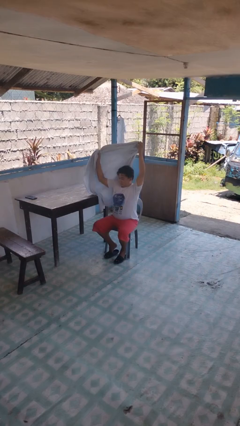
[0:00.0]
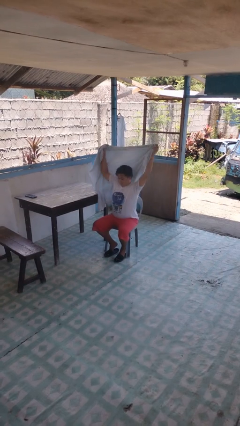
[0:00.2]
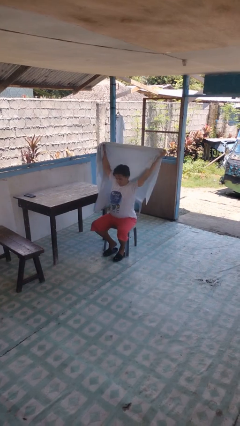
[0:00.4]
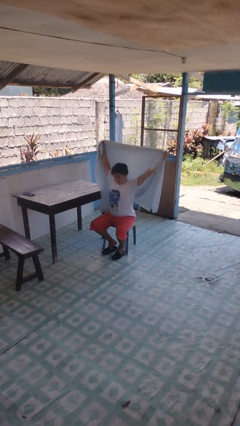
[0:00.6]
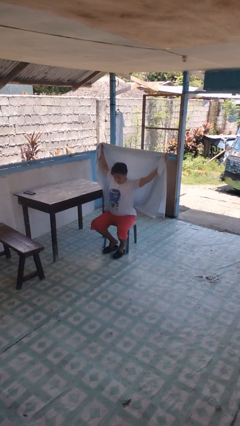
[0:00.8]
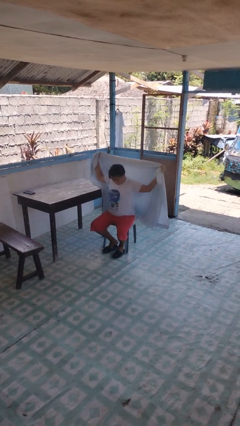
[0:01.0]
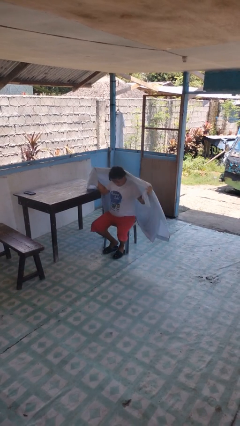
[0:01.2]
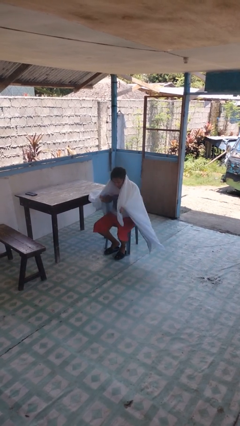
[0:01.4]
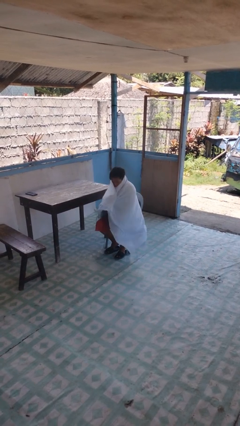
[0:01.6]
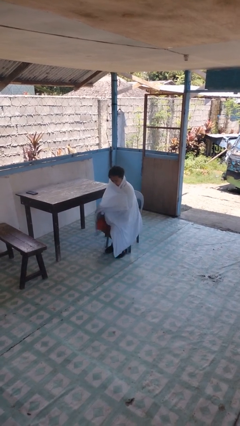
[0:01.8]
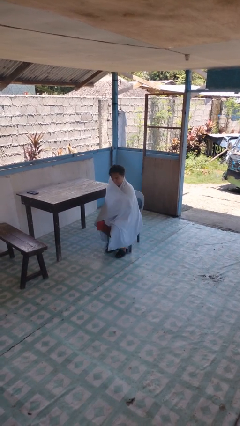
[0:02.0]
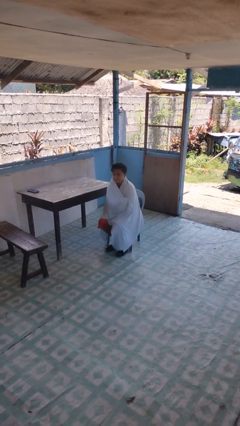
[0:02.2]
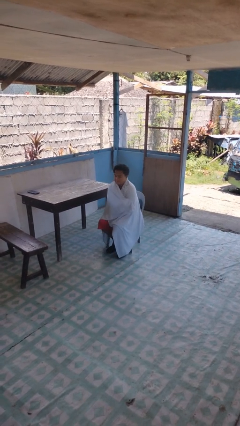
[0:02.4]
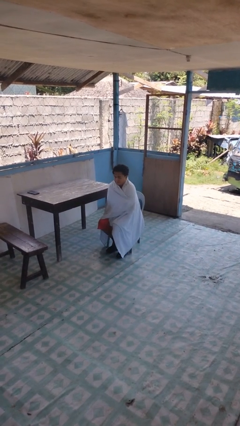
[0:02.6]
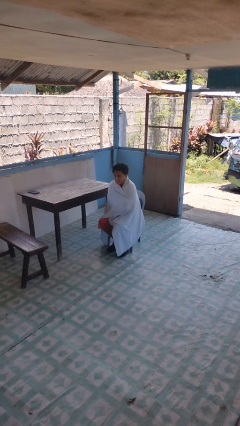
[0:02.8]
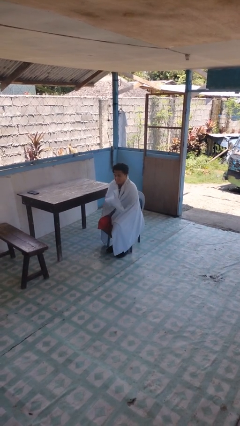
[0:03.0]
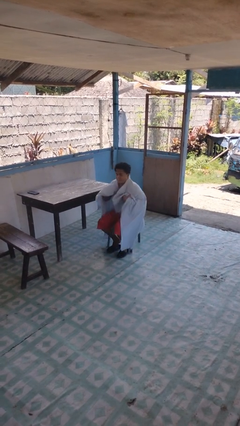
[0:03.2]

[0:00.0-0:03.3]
person covers with blanket

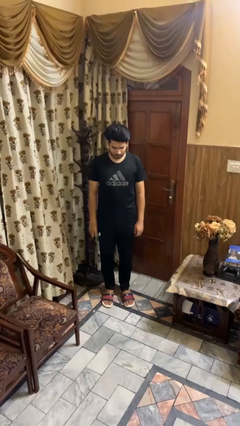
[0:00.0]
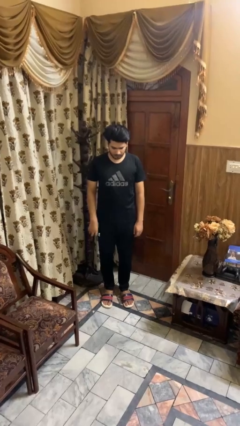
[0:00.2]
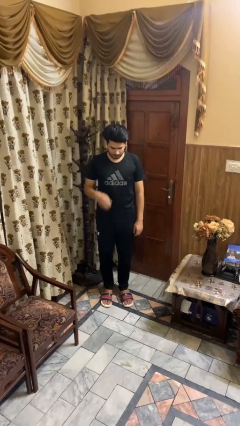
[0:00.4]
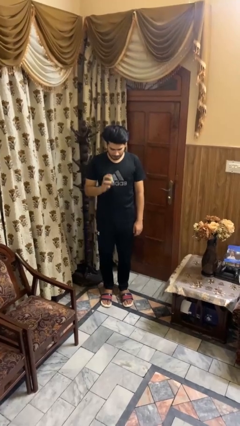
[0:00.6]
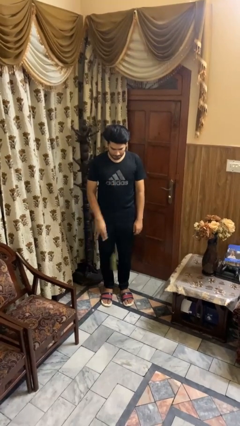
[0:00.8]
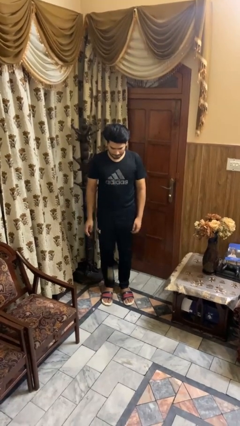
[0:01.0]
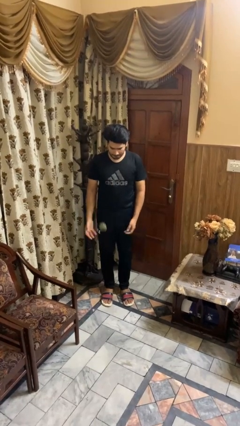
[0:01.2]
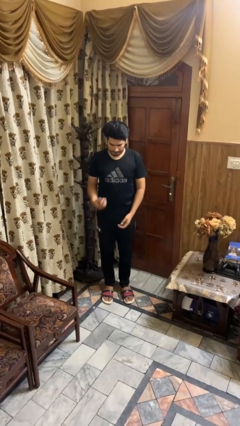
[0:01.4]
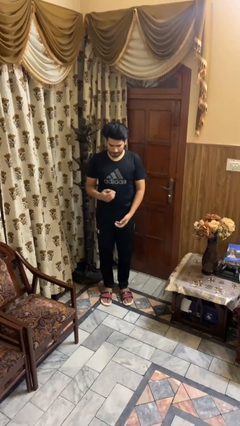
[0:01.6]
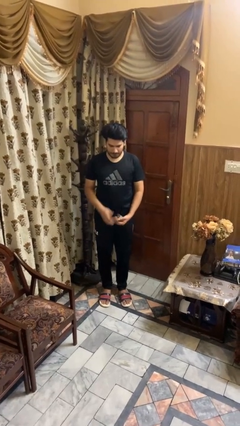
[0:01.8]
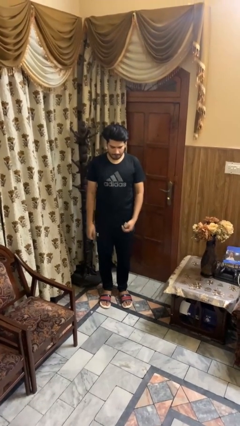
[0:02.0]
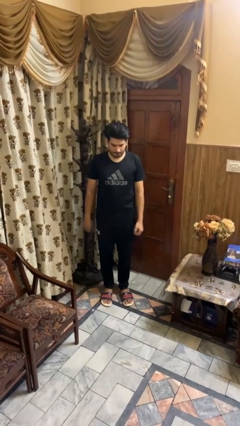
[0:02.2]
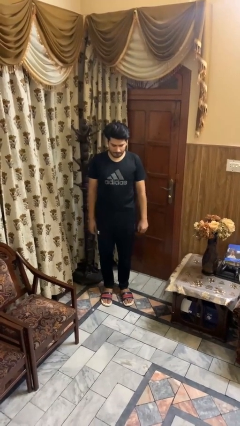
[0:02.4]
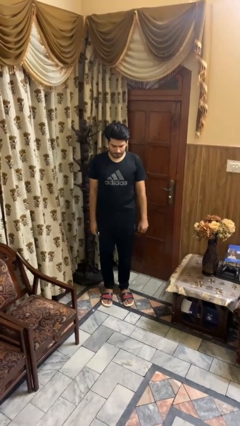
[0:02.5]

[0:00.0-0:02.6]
person bounces ball on floor

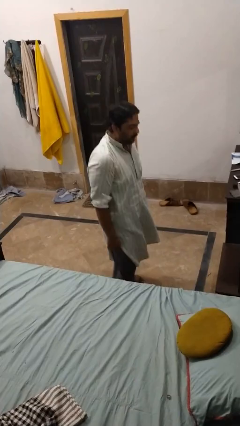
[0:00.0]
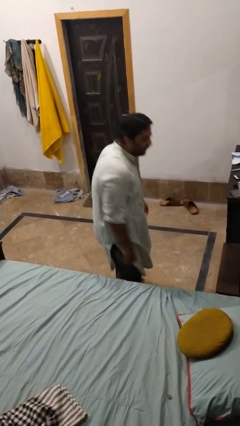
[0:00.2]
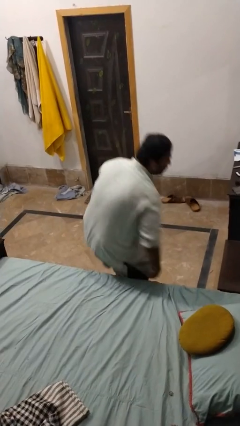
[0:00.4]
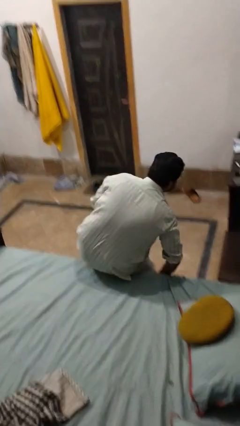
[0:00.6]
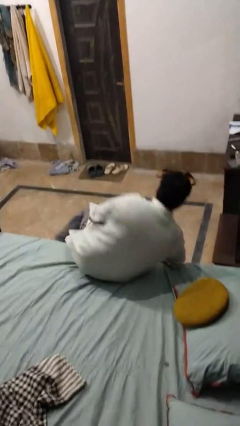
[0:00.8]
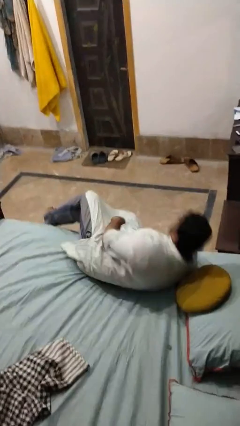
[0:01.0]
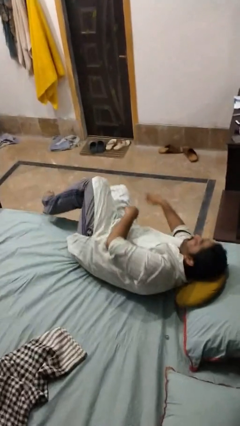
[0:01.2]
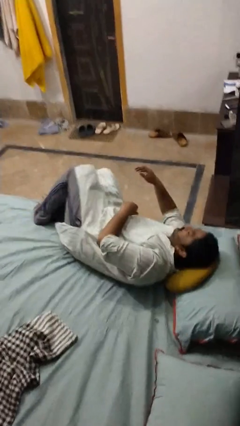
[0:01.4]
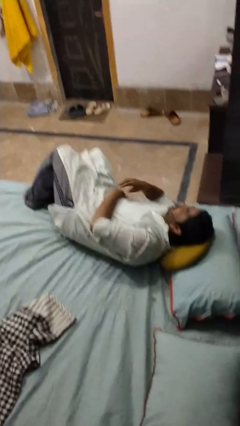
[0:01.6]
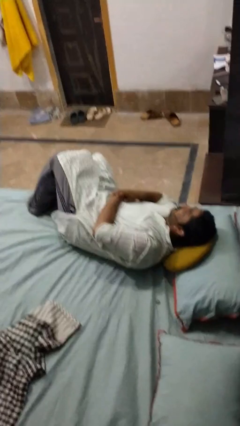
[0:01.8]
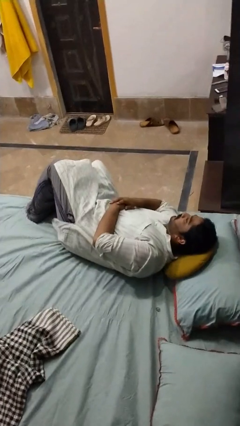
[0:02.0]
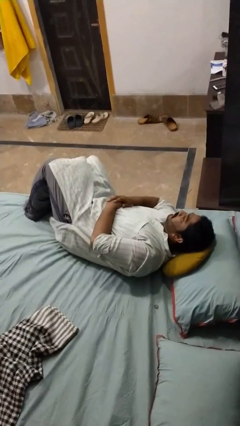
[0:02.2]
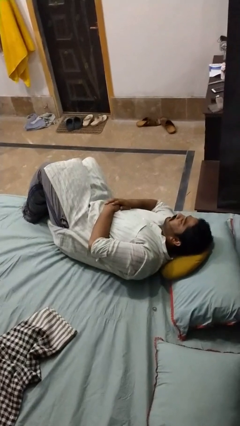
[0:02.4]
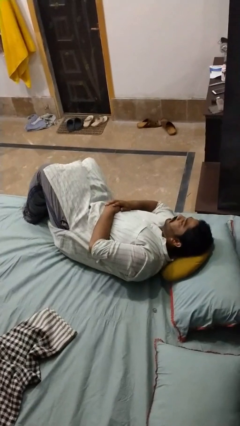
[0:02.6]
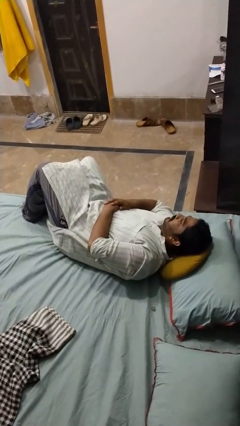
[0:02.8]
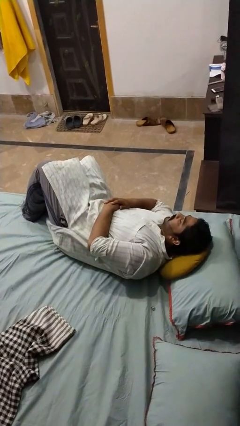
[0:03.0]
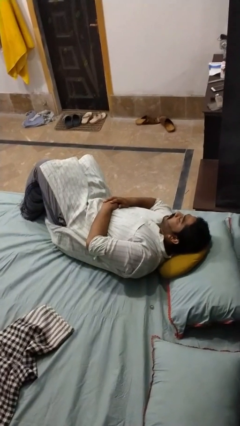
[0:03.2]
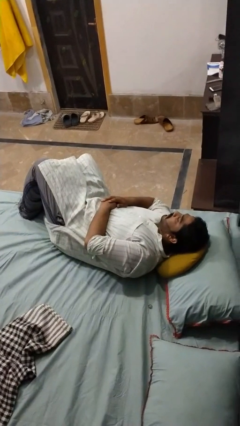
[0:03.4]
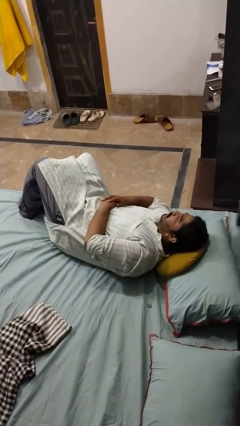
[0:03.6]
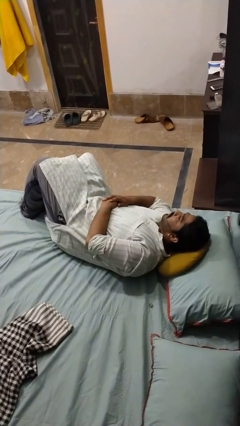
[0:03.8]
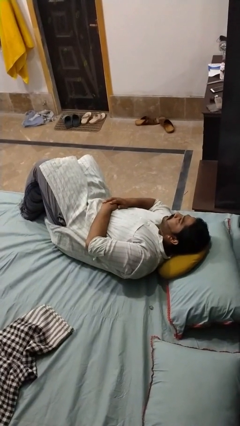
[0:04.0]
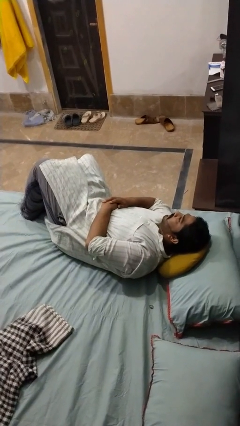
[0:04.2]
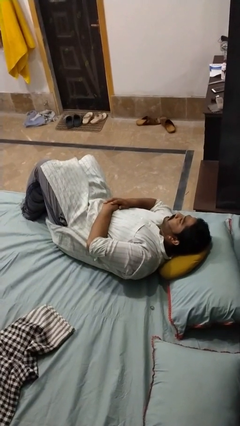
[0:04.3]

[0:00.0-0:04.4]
person lies down on bed

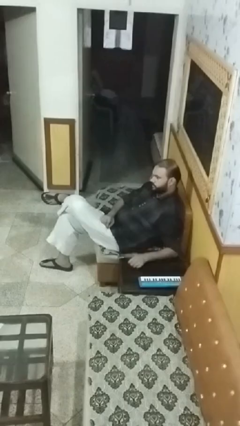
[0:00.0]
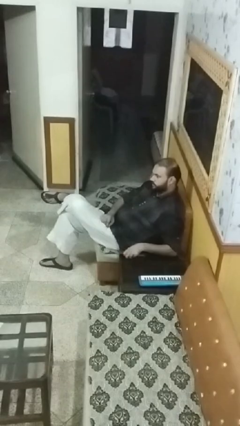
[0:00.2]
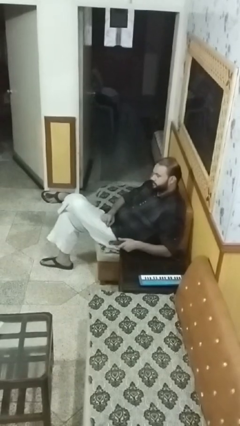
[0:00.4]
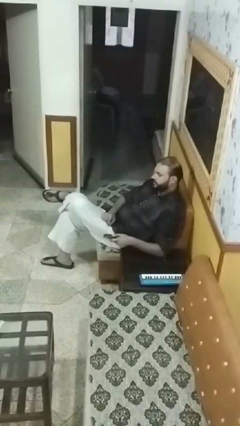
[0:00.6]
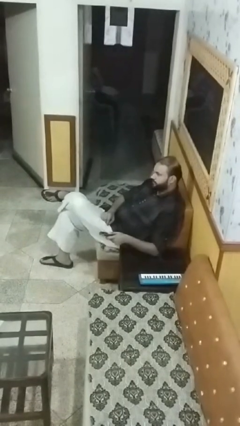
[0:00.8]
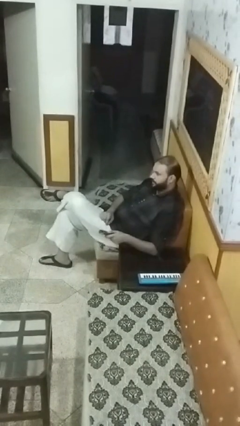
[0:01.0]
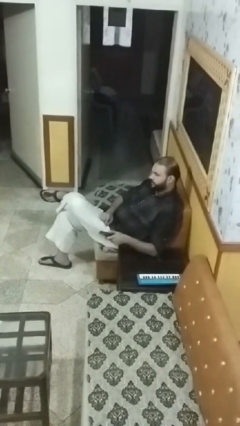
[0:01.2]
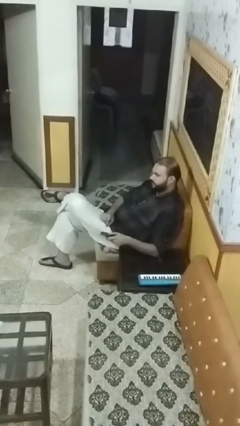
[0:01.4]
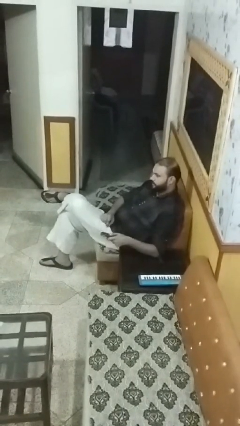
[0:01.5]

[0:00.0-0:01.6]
person uses television remote

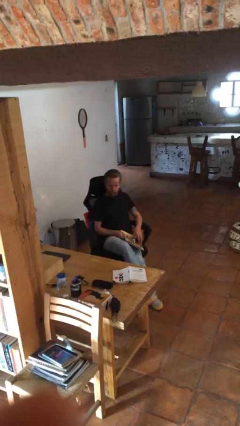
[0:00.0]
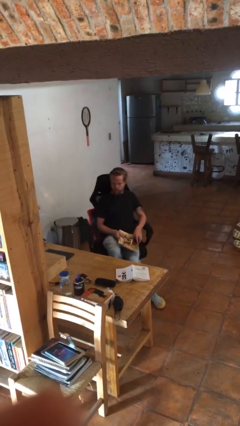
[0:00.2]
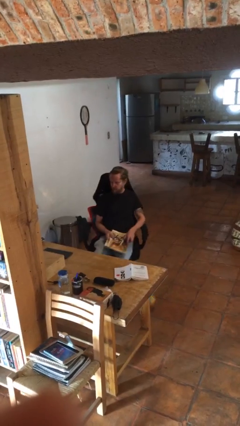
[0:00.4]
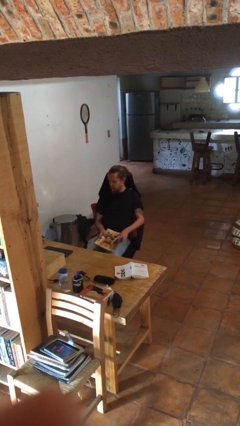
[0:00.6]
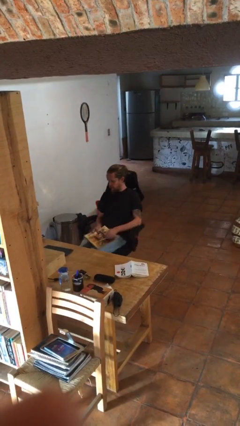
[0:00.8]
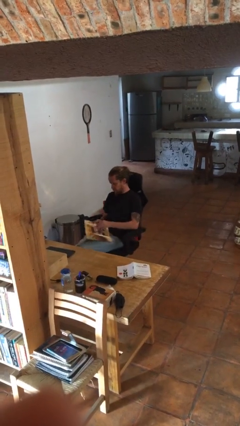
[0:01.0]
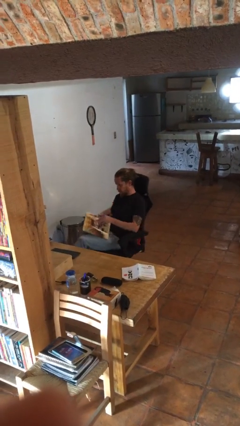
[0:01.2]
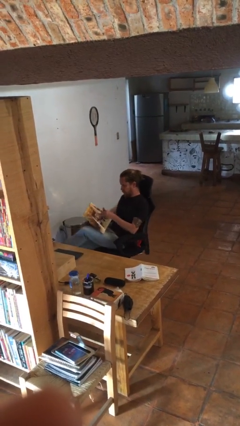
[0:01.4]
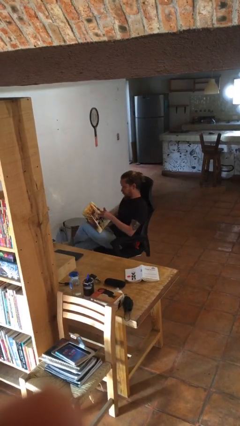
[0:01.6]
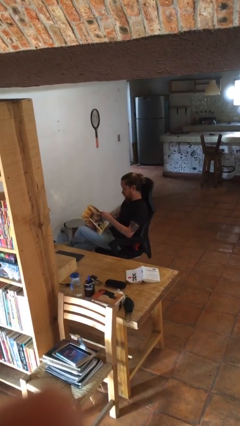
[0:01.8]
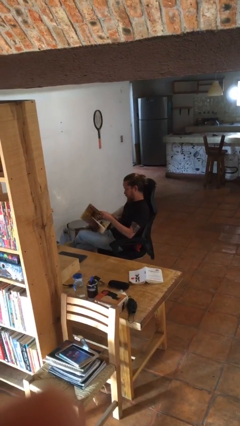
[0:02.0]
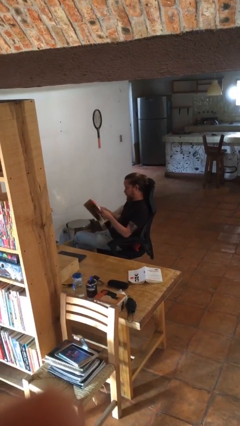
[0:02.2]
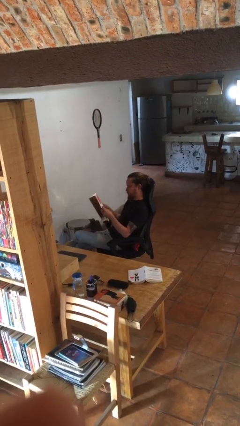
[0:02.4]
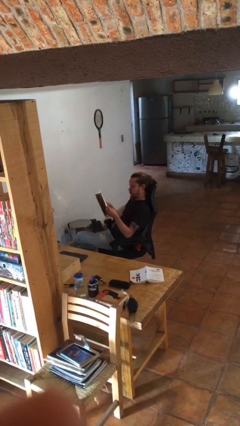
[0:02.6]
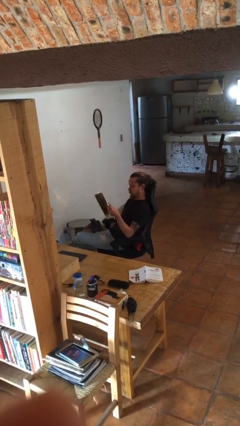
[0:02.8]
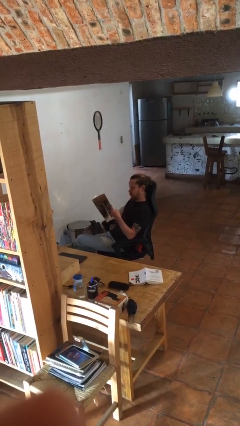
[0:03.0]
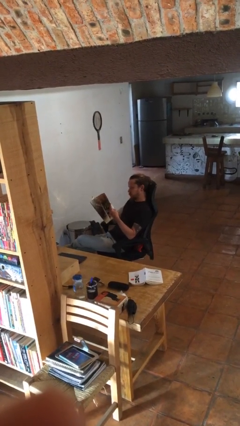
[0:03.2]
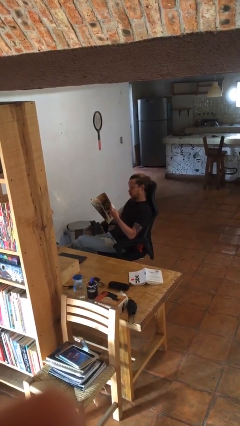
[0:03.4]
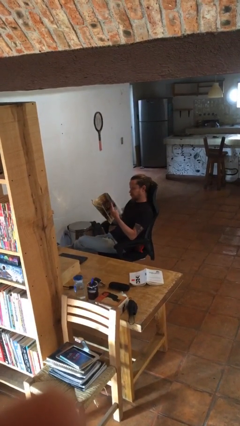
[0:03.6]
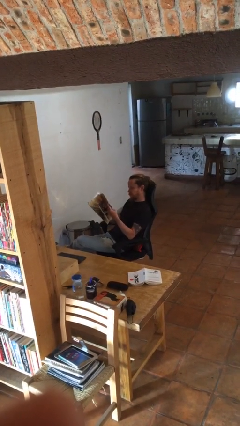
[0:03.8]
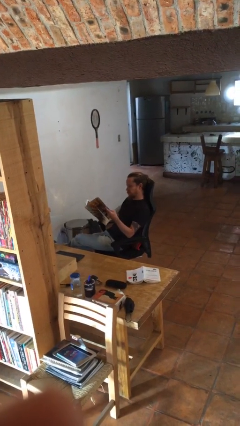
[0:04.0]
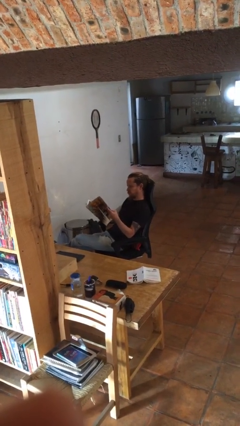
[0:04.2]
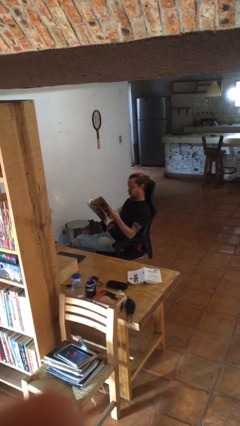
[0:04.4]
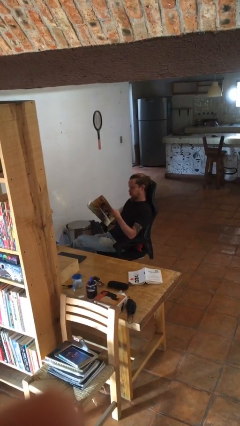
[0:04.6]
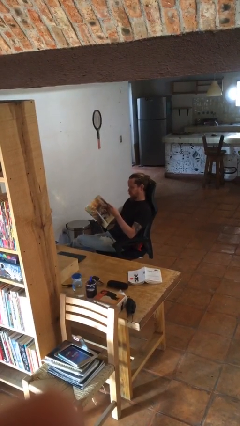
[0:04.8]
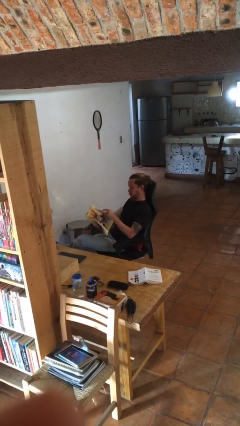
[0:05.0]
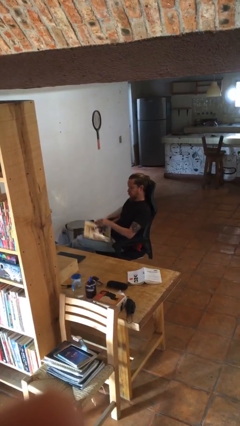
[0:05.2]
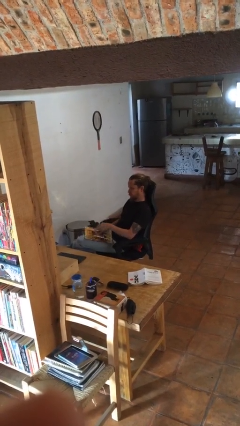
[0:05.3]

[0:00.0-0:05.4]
person reads magazine

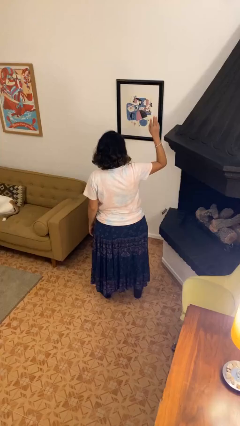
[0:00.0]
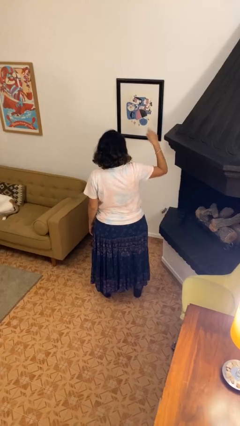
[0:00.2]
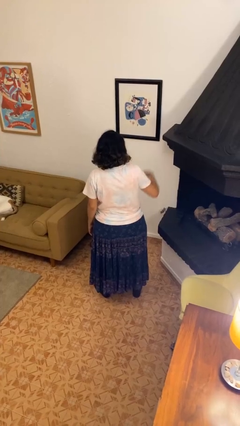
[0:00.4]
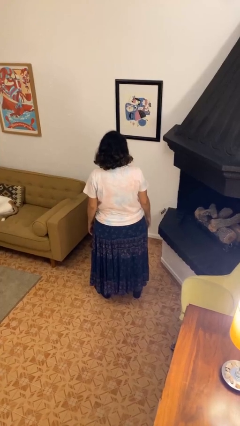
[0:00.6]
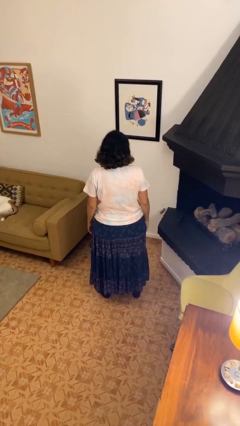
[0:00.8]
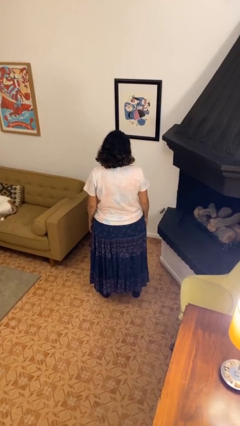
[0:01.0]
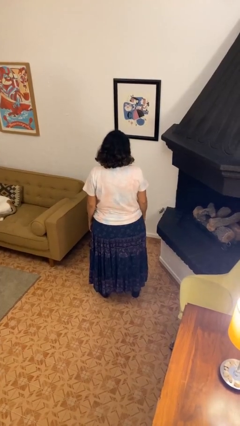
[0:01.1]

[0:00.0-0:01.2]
person gestures lower hand
